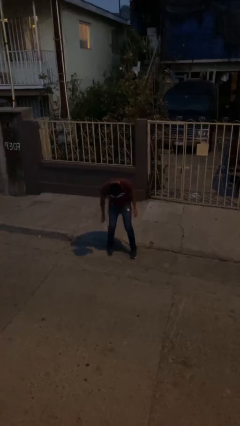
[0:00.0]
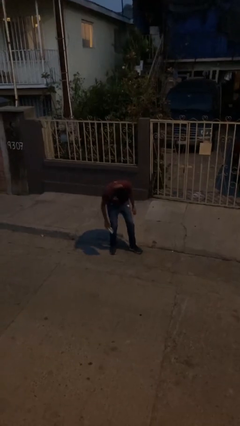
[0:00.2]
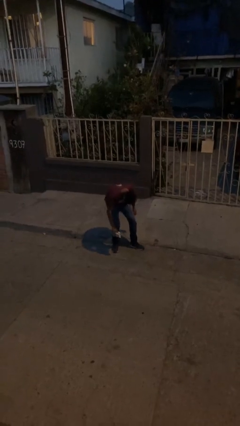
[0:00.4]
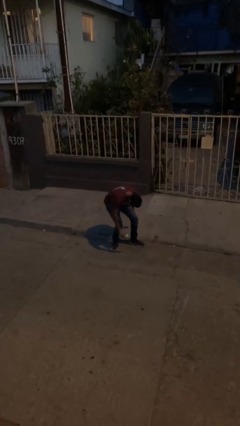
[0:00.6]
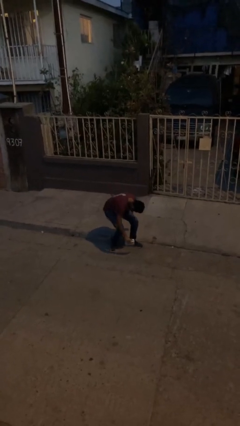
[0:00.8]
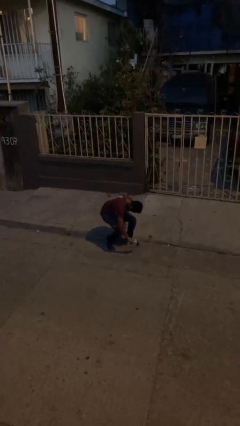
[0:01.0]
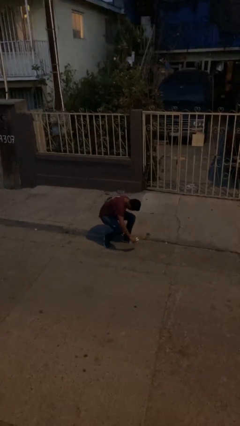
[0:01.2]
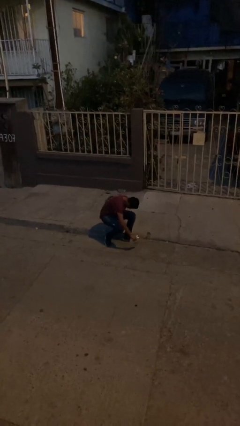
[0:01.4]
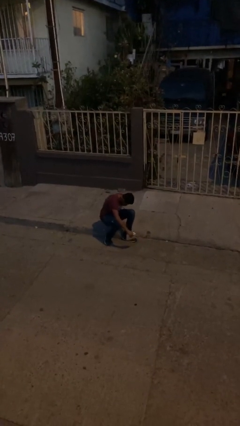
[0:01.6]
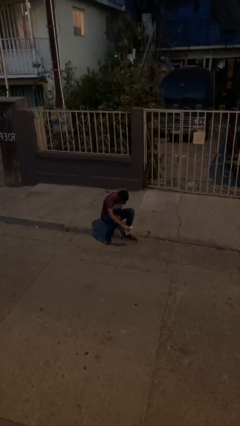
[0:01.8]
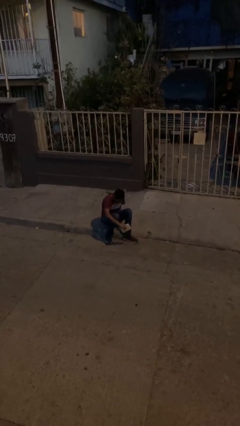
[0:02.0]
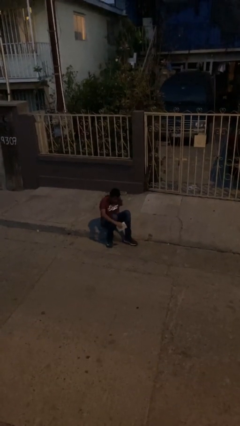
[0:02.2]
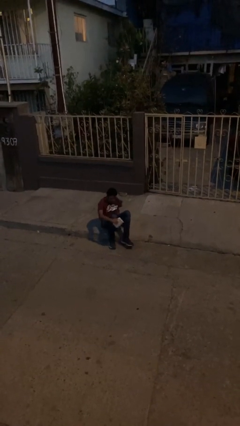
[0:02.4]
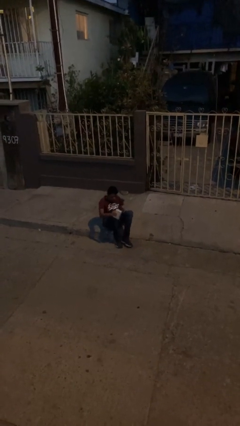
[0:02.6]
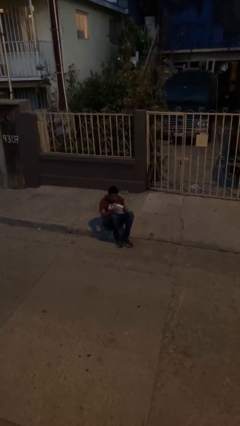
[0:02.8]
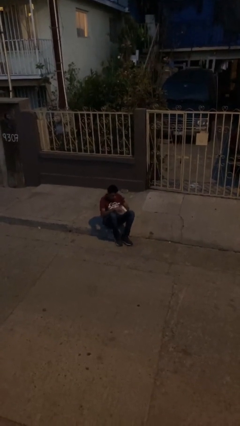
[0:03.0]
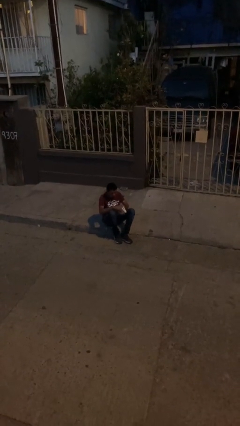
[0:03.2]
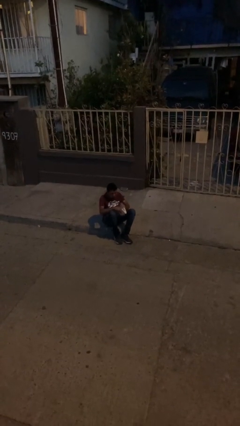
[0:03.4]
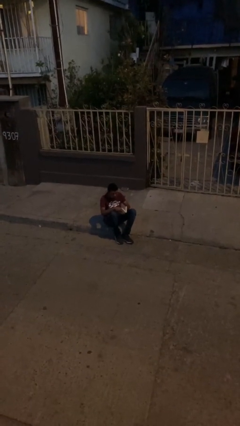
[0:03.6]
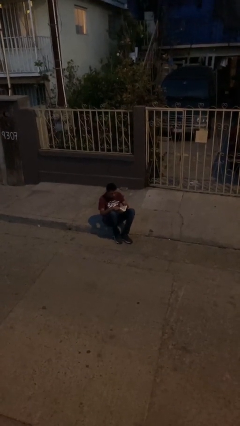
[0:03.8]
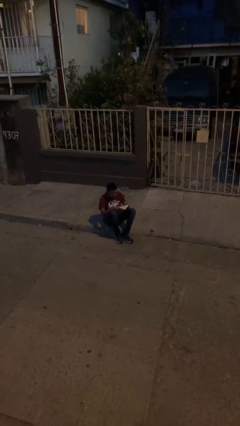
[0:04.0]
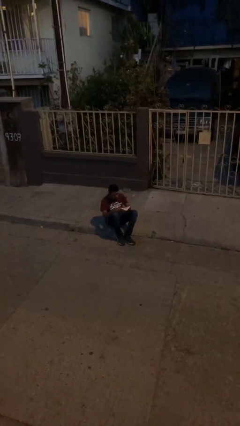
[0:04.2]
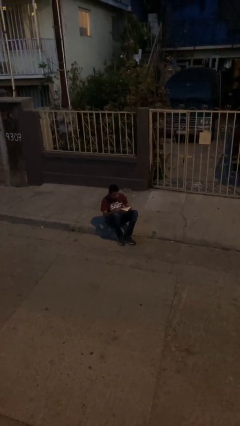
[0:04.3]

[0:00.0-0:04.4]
person sits down

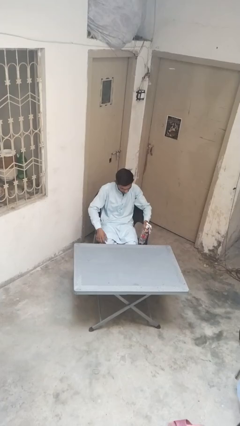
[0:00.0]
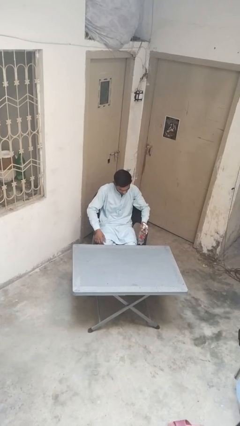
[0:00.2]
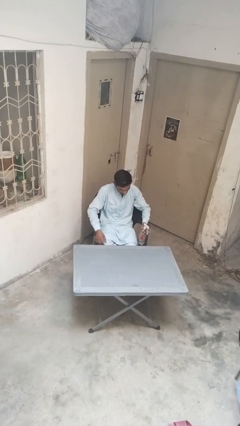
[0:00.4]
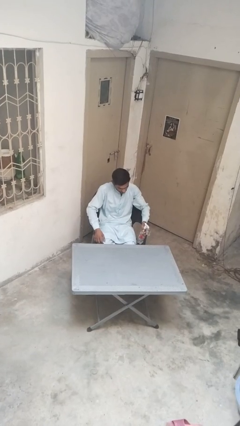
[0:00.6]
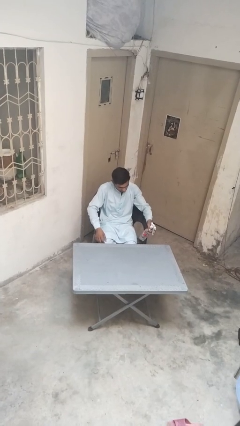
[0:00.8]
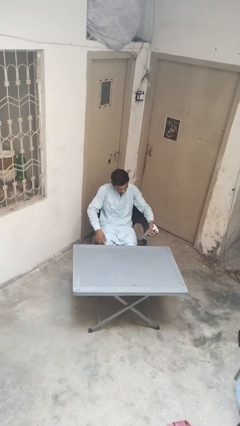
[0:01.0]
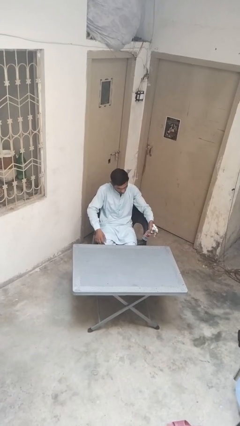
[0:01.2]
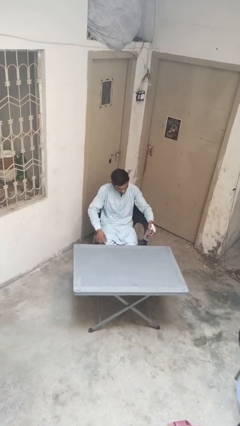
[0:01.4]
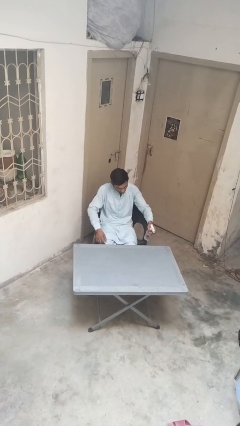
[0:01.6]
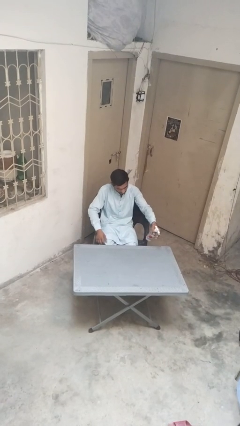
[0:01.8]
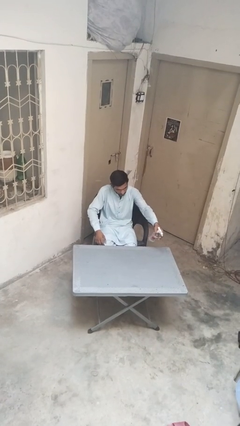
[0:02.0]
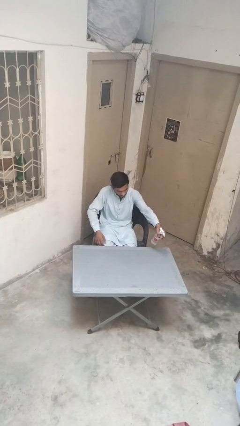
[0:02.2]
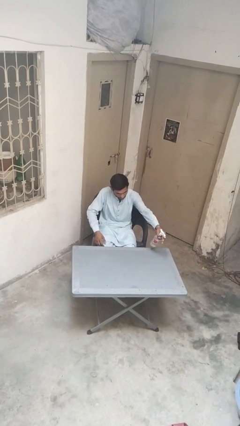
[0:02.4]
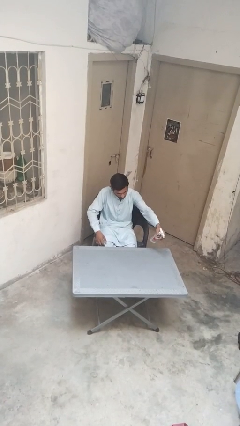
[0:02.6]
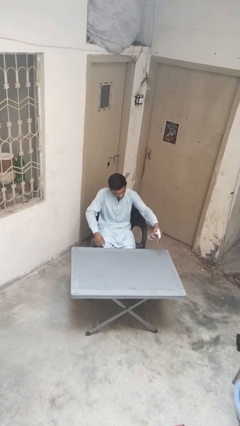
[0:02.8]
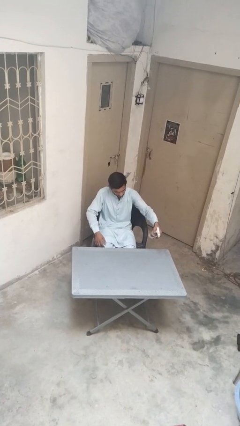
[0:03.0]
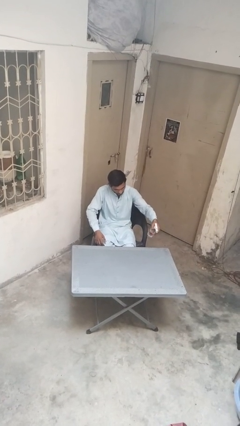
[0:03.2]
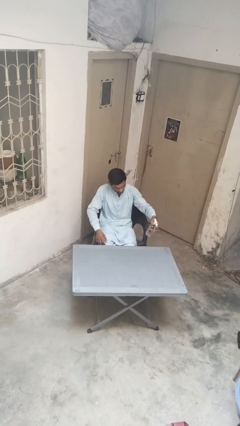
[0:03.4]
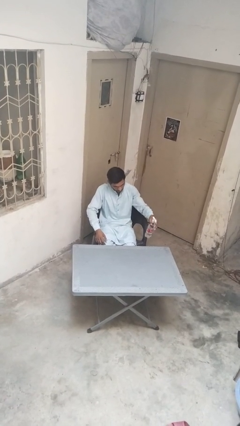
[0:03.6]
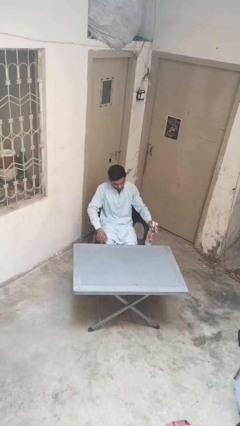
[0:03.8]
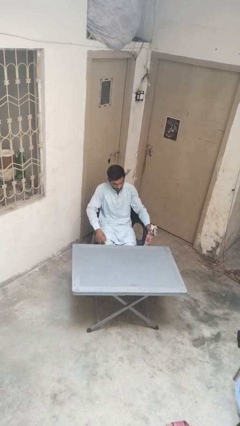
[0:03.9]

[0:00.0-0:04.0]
person sprays from bottle

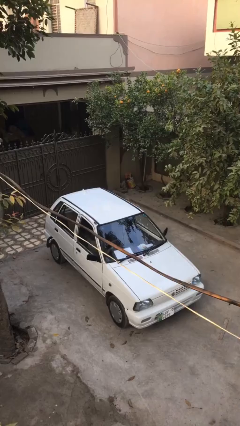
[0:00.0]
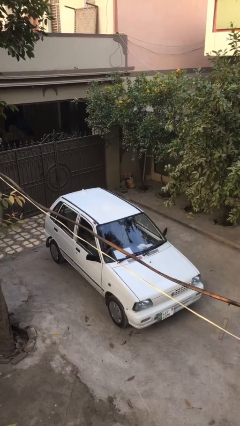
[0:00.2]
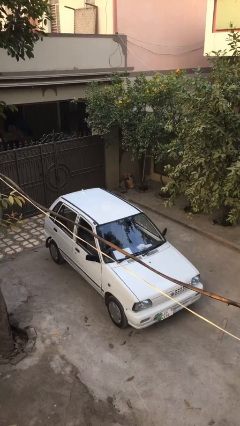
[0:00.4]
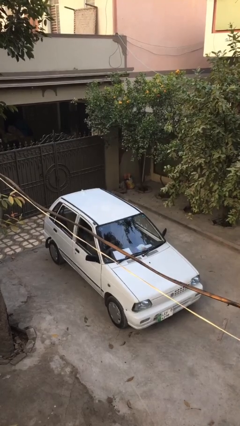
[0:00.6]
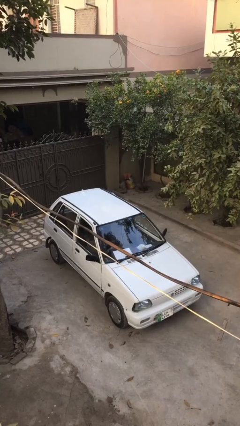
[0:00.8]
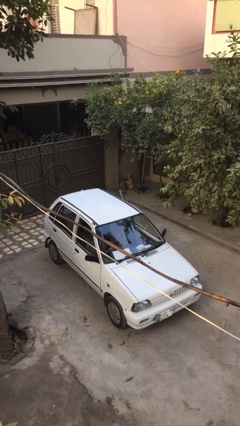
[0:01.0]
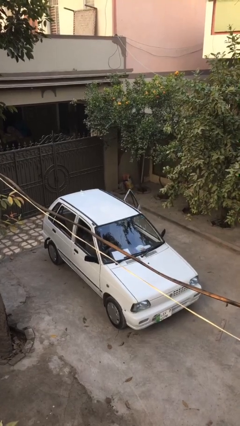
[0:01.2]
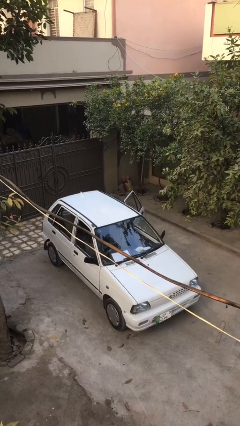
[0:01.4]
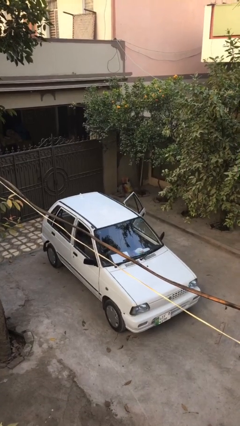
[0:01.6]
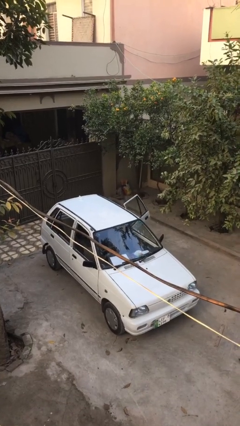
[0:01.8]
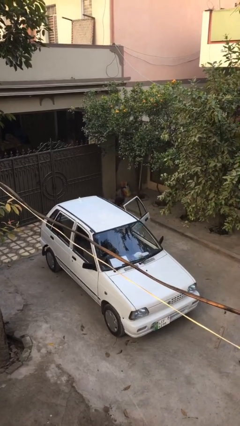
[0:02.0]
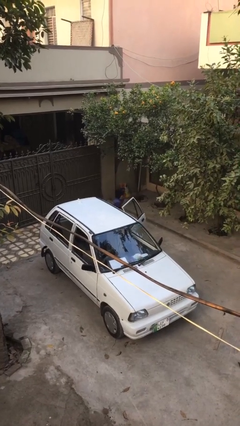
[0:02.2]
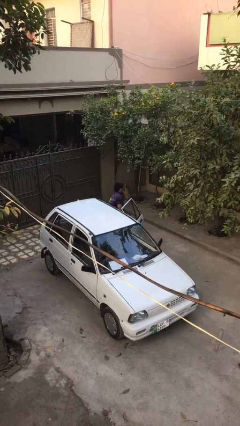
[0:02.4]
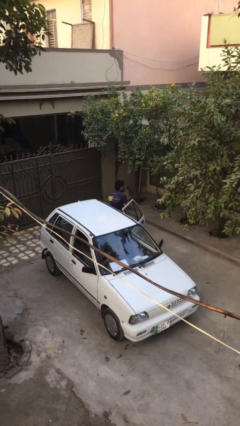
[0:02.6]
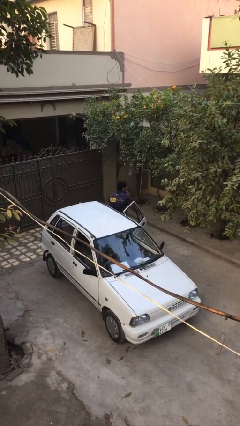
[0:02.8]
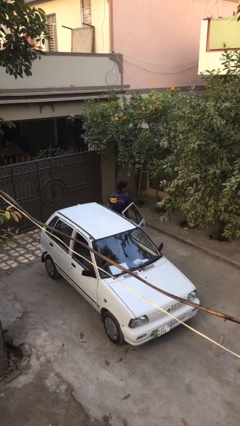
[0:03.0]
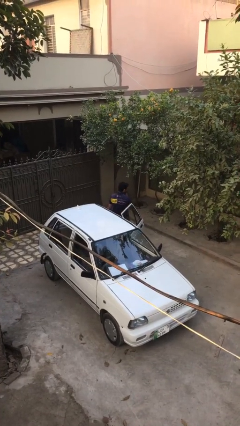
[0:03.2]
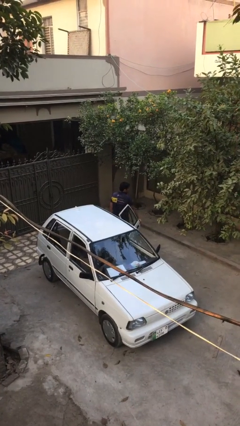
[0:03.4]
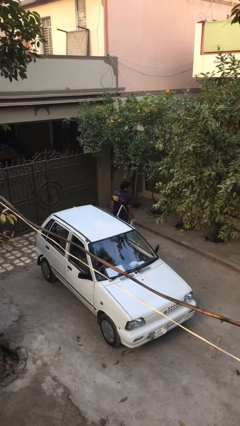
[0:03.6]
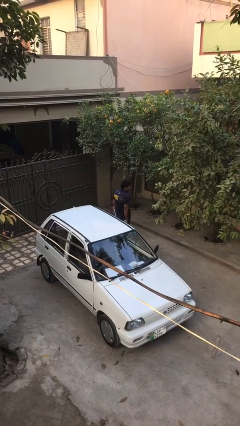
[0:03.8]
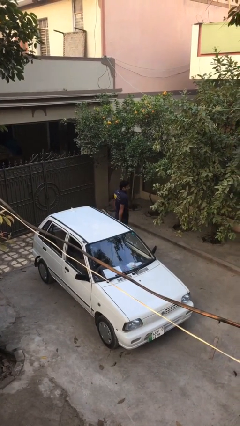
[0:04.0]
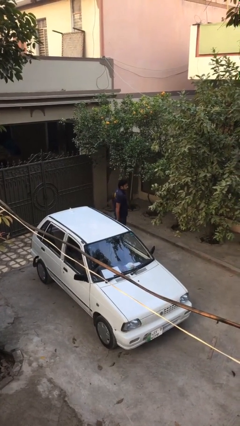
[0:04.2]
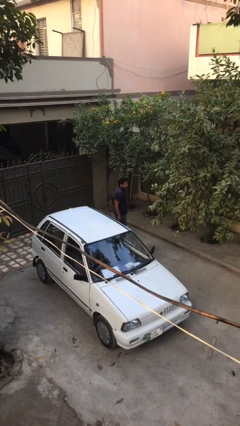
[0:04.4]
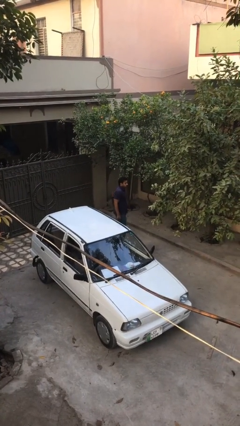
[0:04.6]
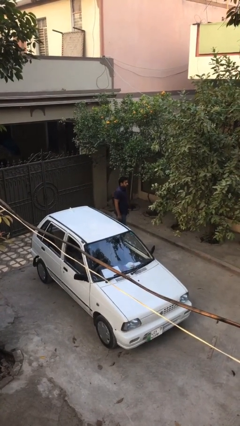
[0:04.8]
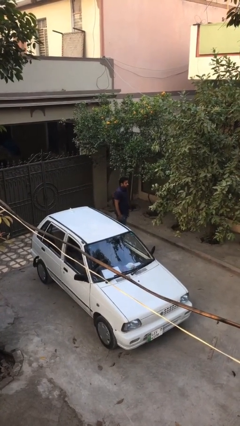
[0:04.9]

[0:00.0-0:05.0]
person exits car

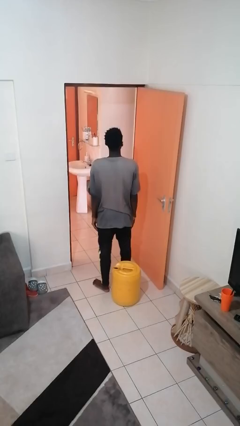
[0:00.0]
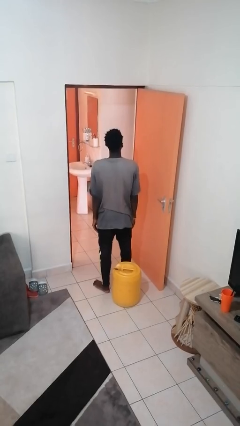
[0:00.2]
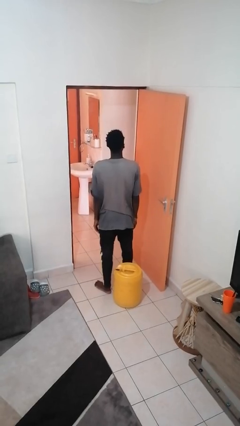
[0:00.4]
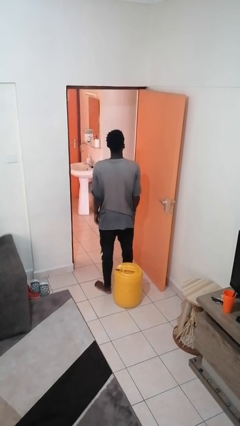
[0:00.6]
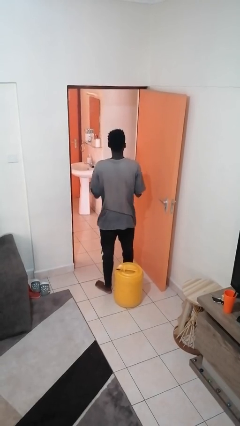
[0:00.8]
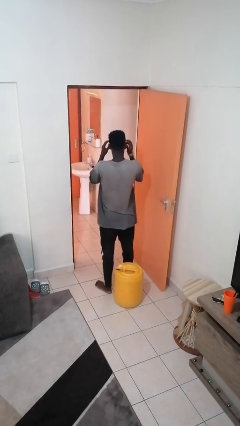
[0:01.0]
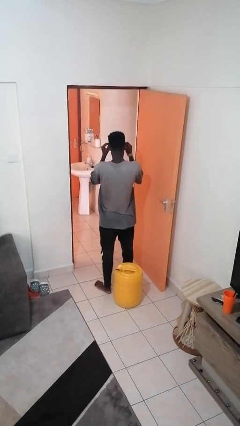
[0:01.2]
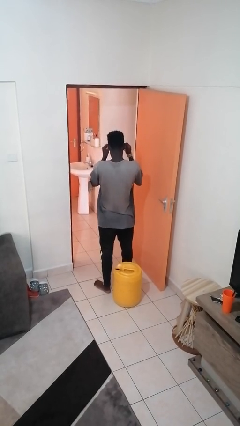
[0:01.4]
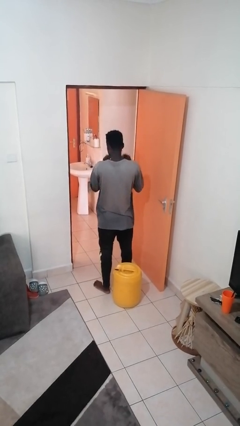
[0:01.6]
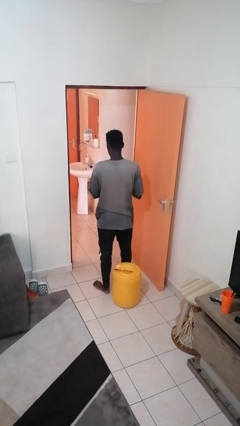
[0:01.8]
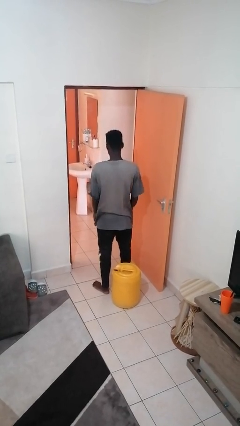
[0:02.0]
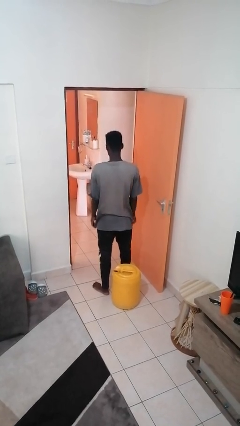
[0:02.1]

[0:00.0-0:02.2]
person takes off glasses

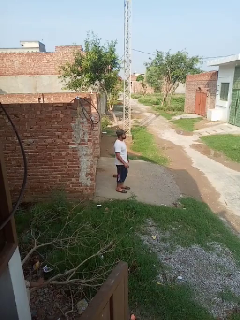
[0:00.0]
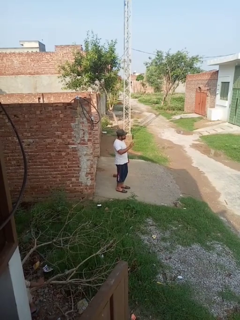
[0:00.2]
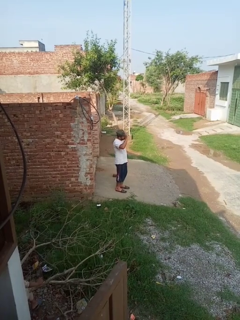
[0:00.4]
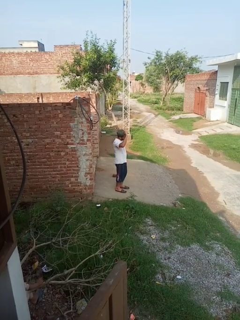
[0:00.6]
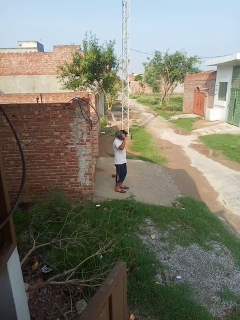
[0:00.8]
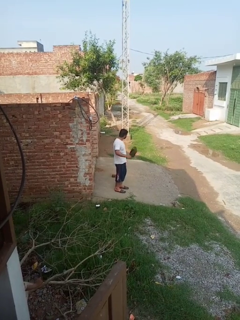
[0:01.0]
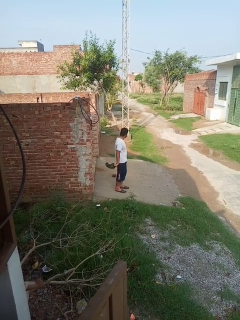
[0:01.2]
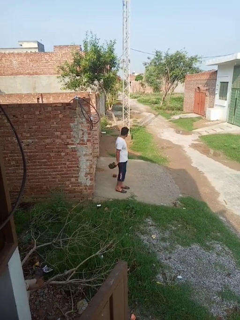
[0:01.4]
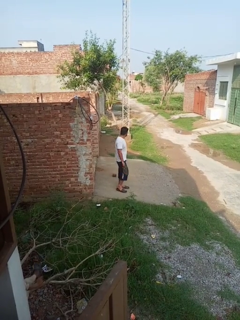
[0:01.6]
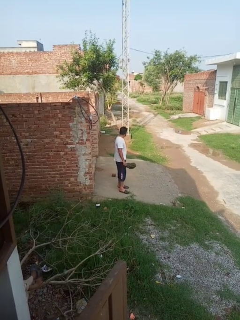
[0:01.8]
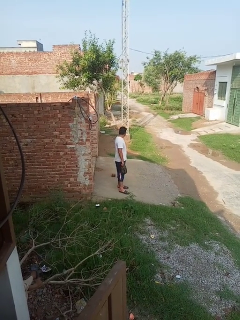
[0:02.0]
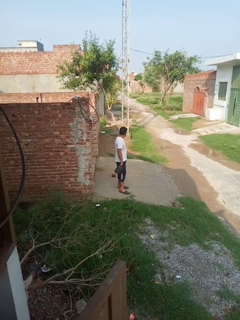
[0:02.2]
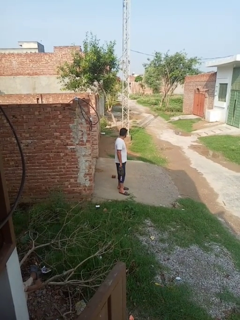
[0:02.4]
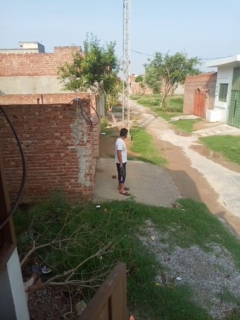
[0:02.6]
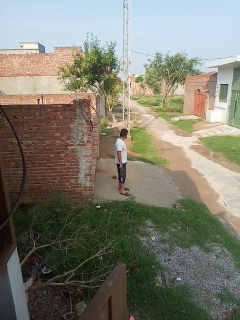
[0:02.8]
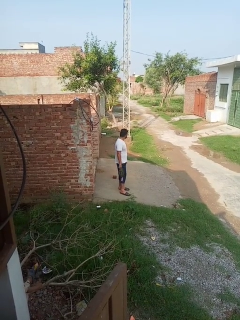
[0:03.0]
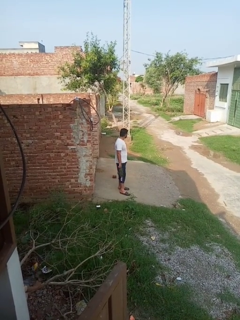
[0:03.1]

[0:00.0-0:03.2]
person takes off hat
